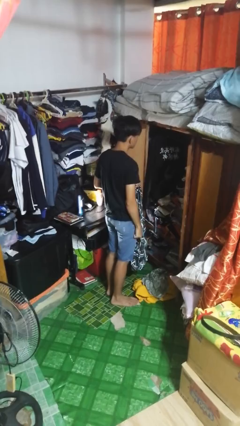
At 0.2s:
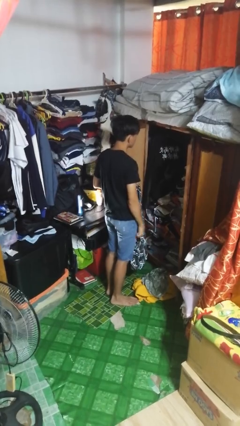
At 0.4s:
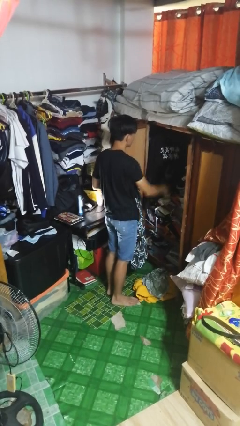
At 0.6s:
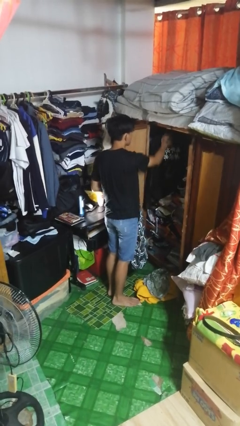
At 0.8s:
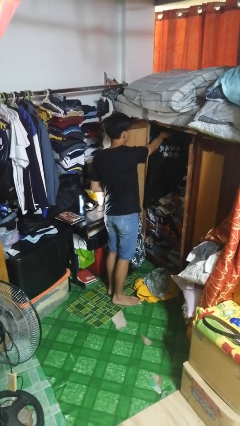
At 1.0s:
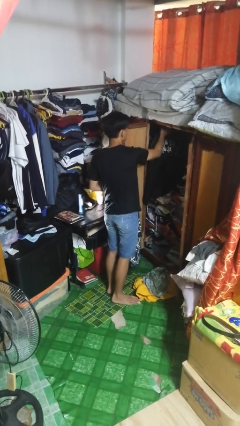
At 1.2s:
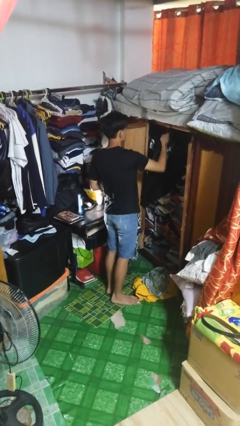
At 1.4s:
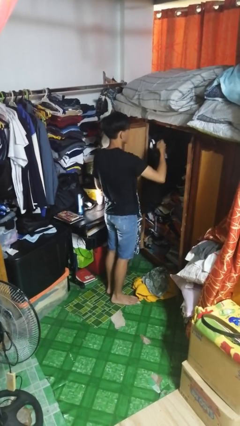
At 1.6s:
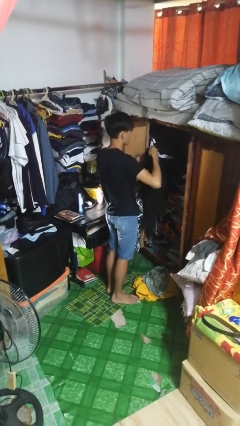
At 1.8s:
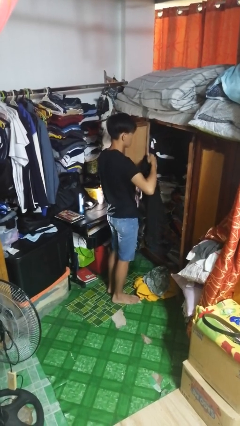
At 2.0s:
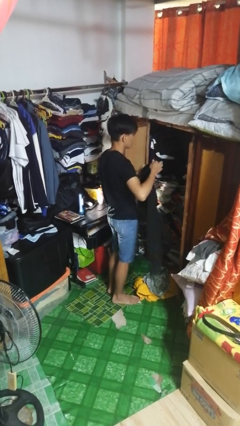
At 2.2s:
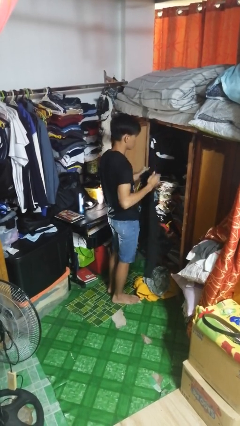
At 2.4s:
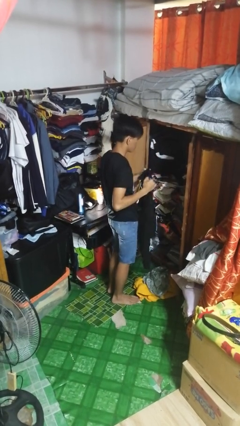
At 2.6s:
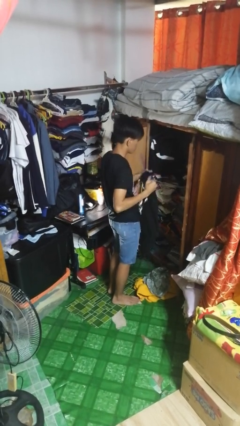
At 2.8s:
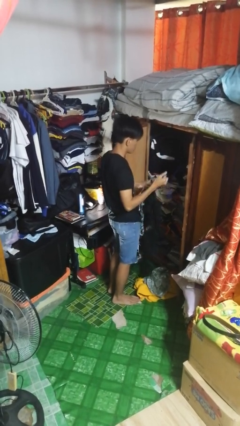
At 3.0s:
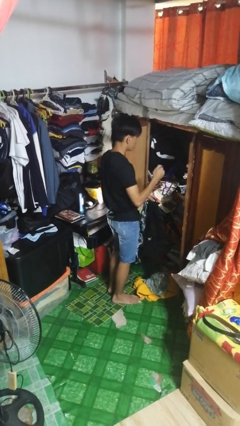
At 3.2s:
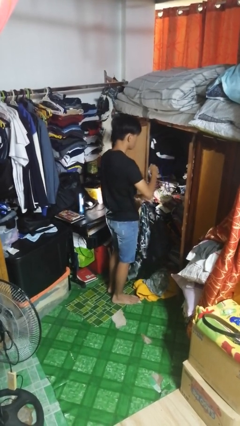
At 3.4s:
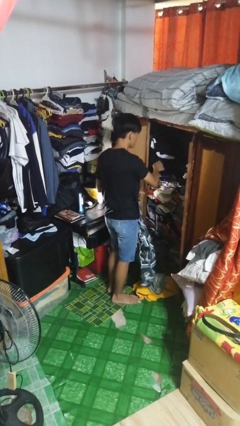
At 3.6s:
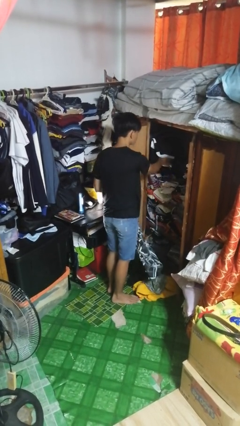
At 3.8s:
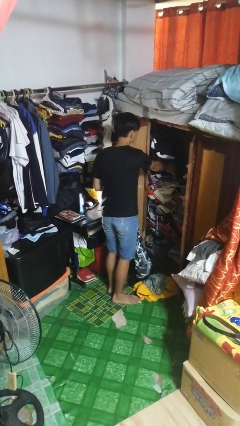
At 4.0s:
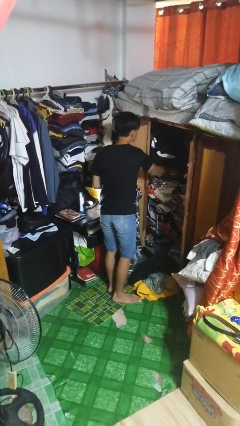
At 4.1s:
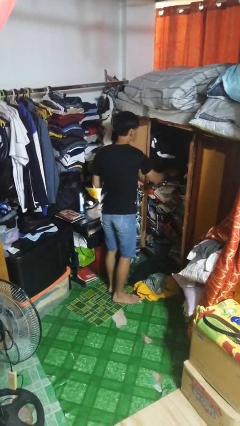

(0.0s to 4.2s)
person takes clothes from closet

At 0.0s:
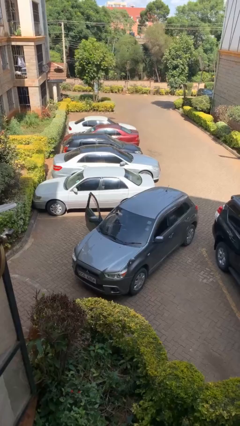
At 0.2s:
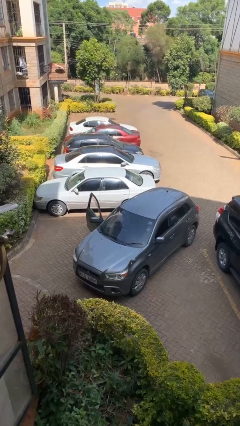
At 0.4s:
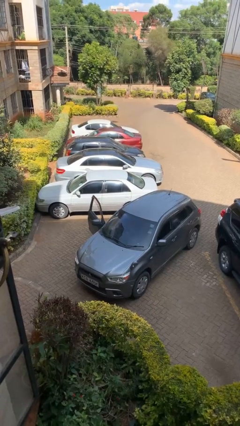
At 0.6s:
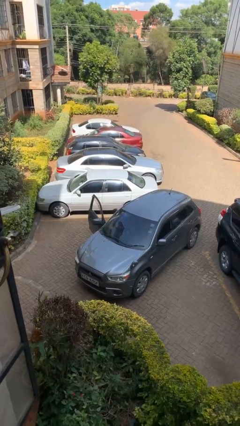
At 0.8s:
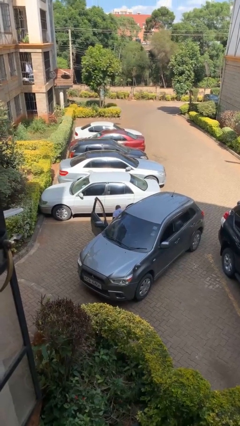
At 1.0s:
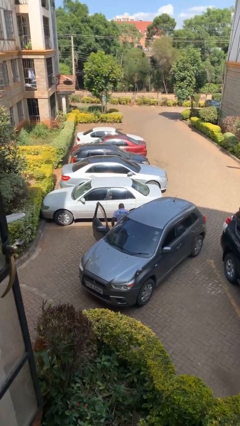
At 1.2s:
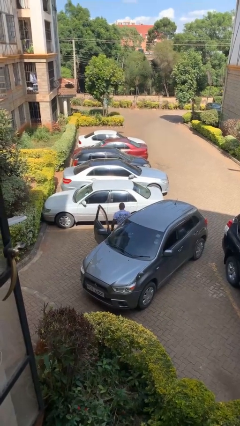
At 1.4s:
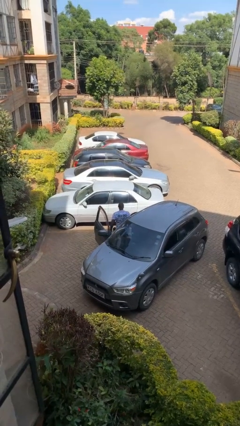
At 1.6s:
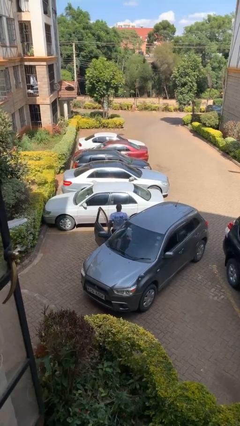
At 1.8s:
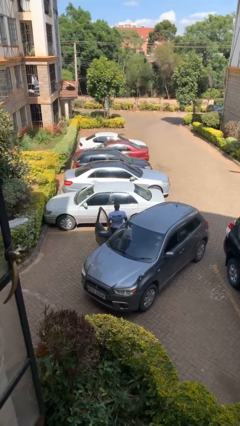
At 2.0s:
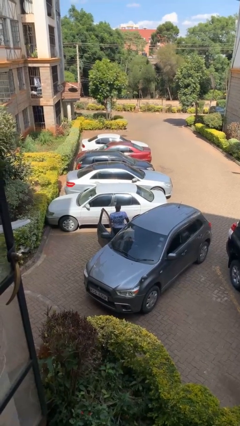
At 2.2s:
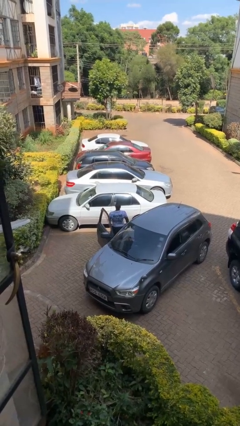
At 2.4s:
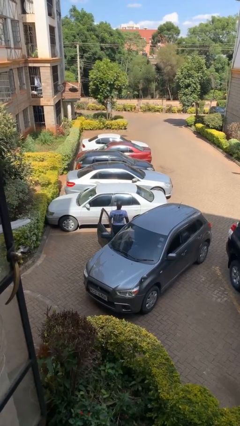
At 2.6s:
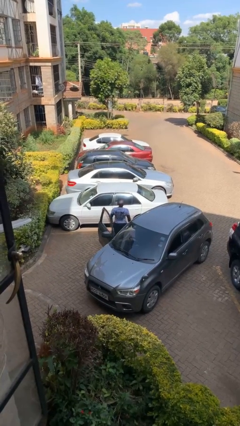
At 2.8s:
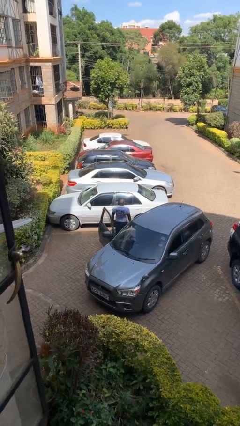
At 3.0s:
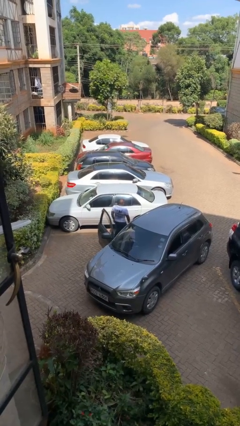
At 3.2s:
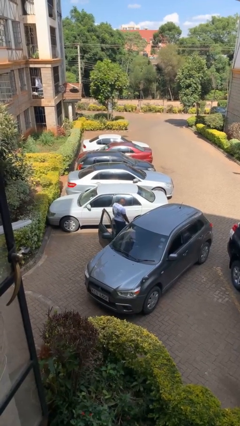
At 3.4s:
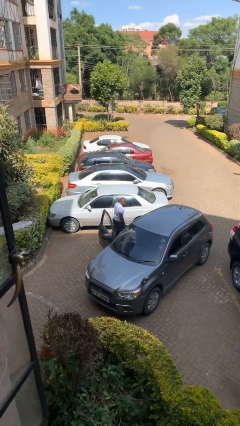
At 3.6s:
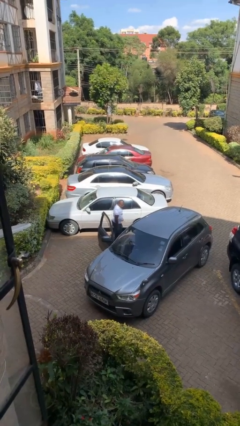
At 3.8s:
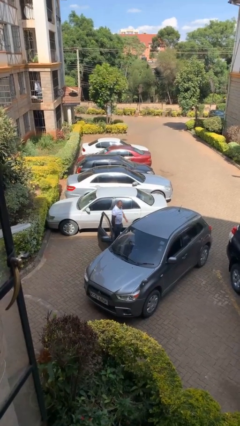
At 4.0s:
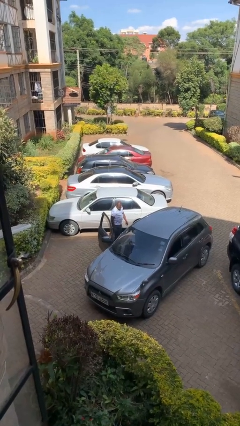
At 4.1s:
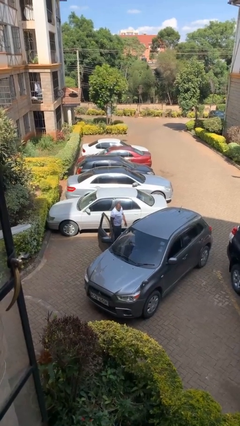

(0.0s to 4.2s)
person exits car

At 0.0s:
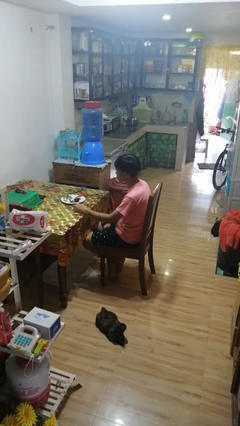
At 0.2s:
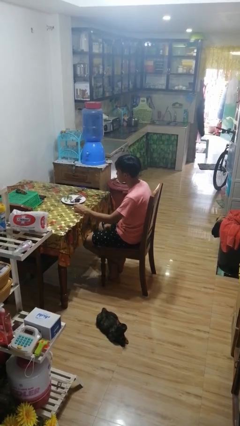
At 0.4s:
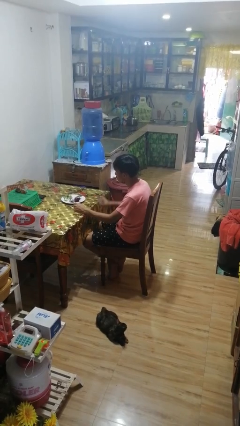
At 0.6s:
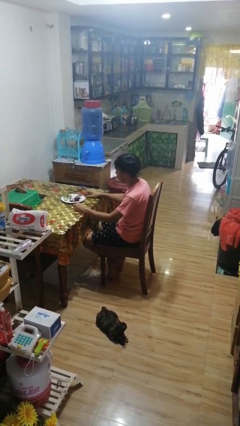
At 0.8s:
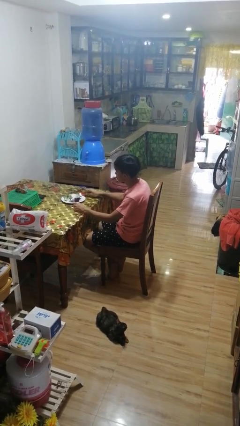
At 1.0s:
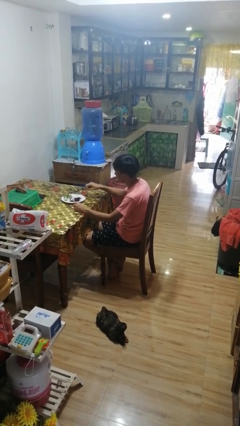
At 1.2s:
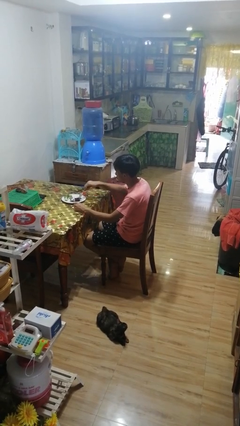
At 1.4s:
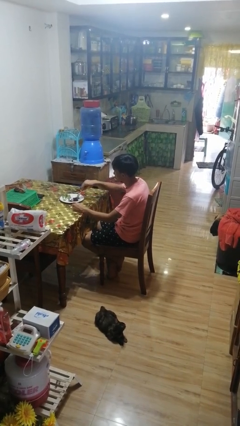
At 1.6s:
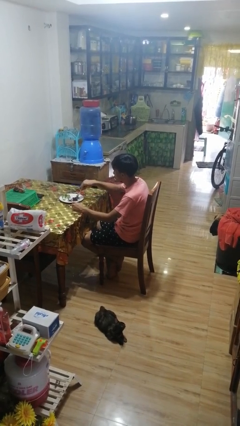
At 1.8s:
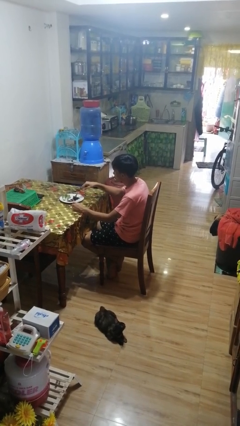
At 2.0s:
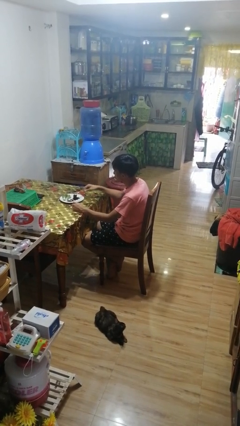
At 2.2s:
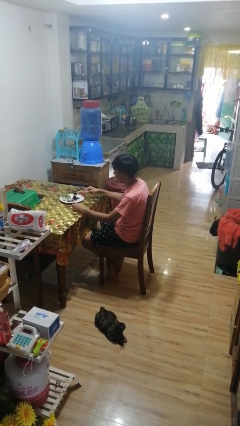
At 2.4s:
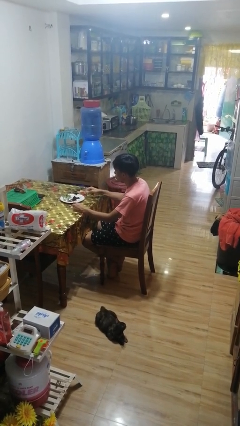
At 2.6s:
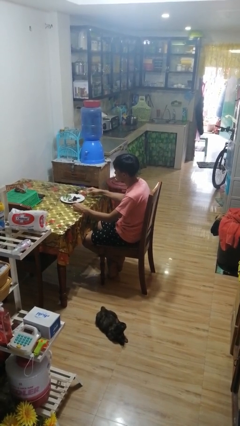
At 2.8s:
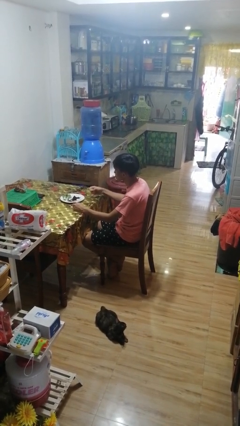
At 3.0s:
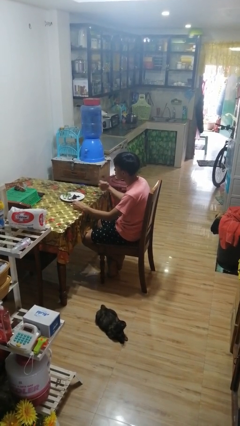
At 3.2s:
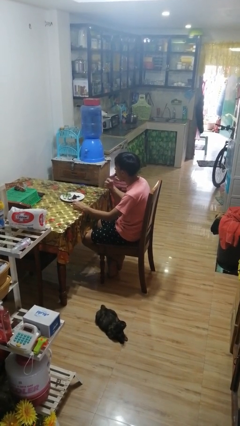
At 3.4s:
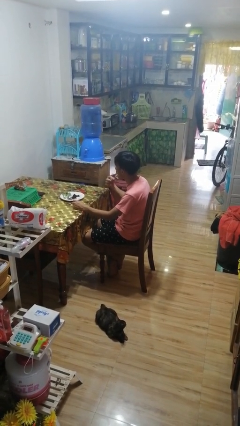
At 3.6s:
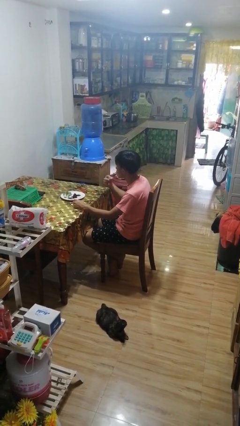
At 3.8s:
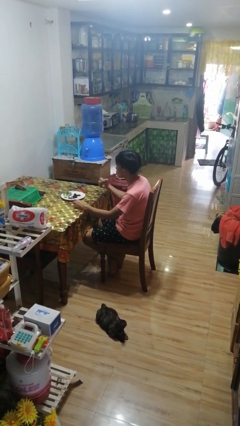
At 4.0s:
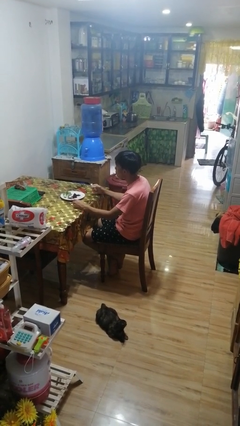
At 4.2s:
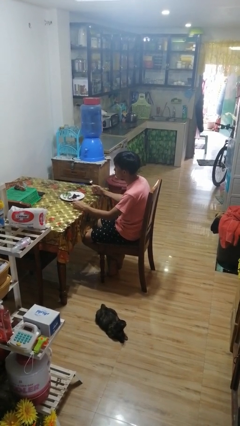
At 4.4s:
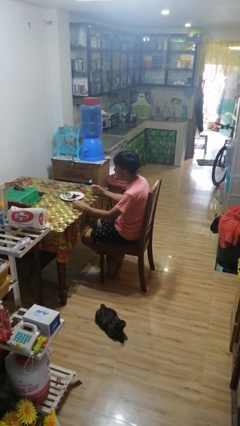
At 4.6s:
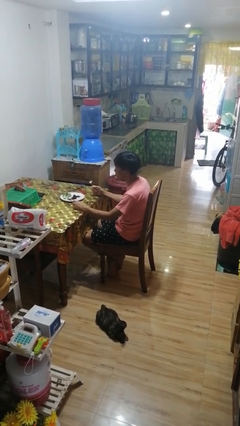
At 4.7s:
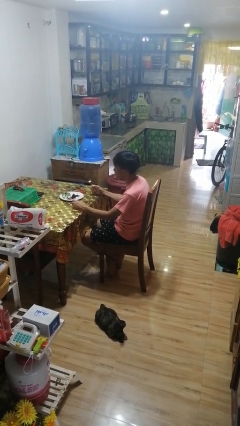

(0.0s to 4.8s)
person eats with utensil

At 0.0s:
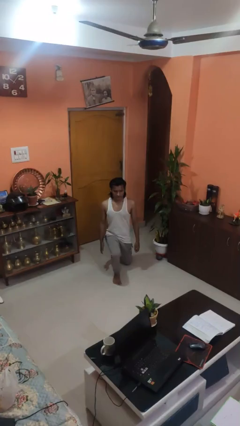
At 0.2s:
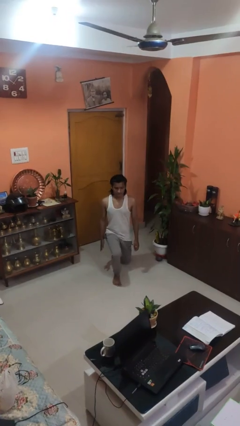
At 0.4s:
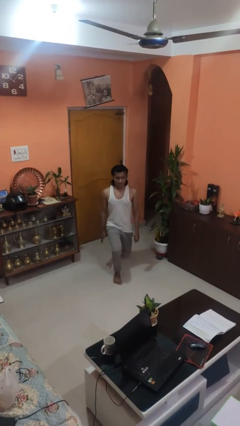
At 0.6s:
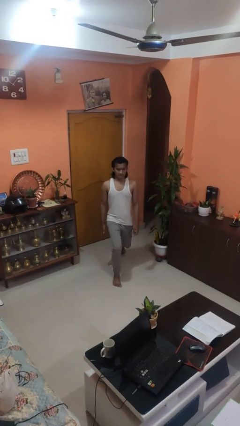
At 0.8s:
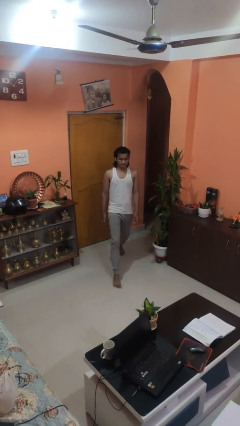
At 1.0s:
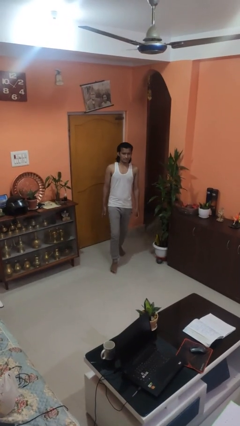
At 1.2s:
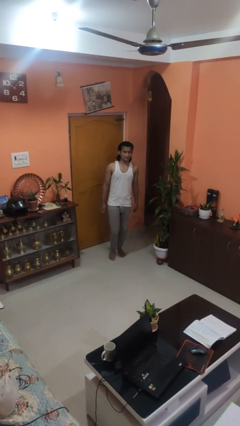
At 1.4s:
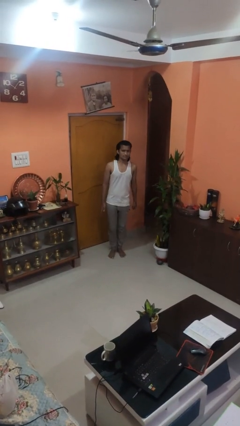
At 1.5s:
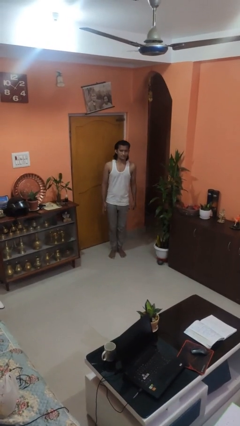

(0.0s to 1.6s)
person stands up from floor

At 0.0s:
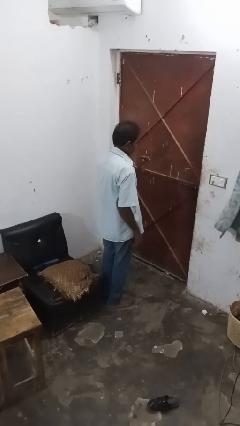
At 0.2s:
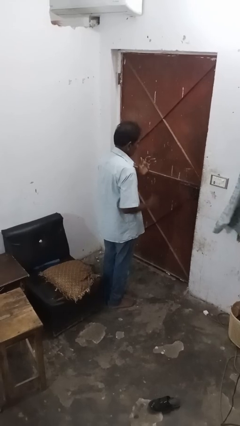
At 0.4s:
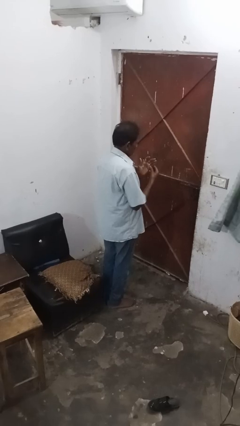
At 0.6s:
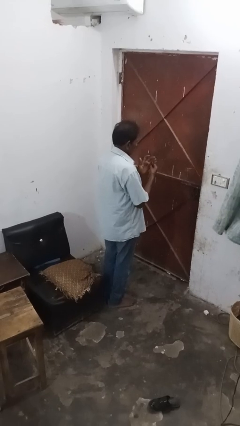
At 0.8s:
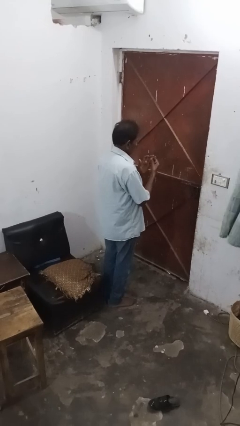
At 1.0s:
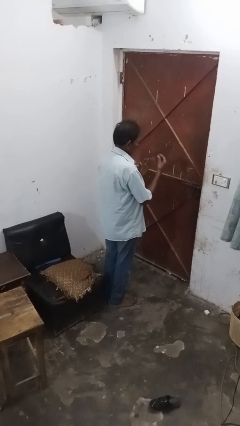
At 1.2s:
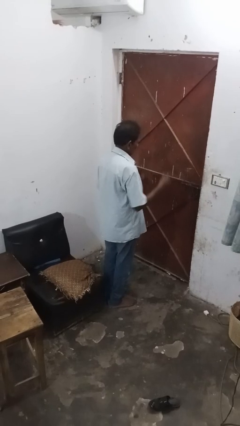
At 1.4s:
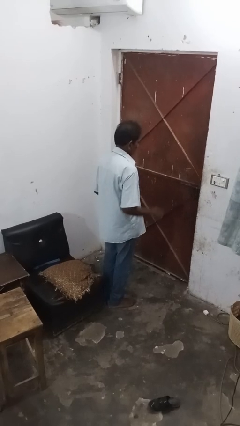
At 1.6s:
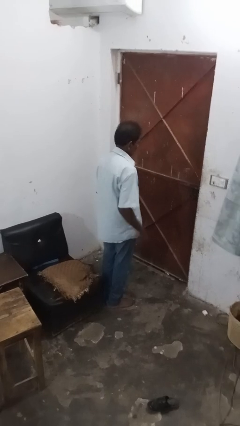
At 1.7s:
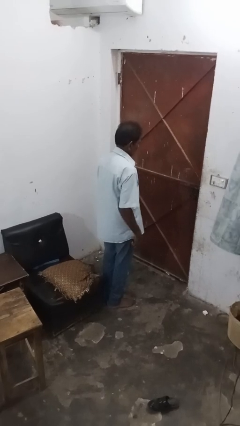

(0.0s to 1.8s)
person takes off ring

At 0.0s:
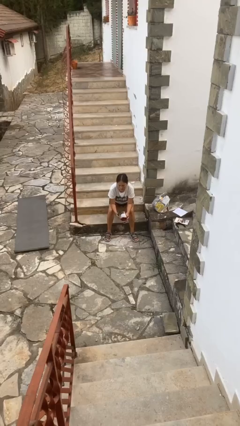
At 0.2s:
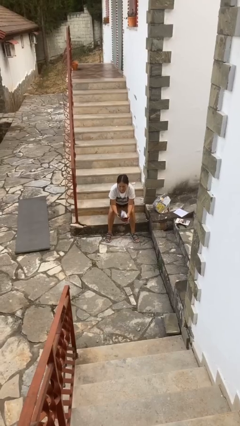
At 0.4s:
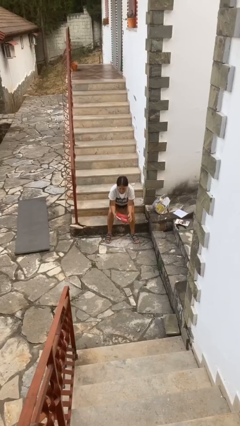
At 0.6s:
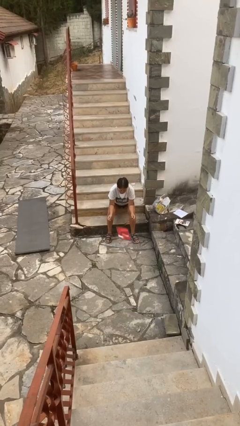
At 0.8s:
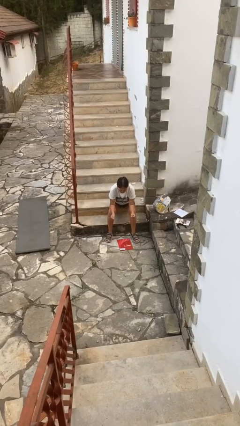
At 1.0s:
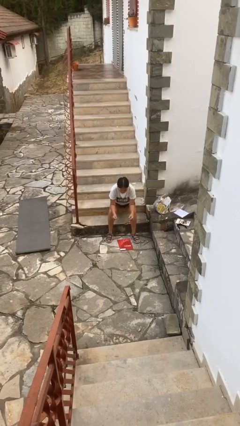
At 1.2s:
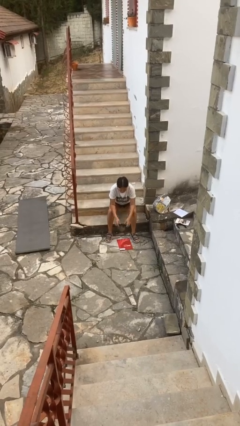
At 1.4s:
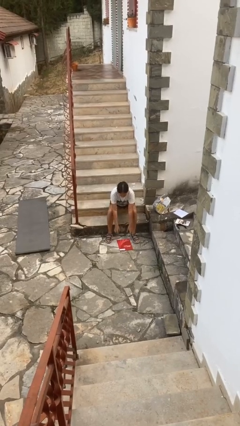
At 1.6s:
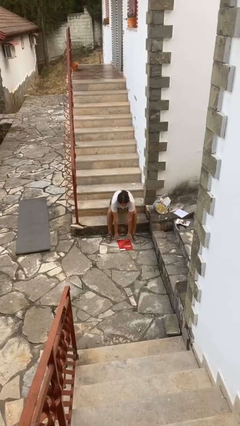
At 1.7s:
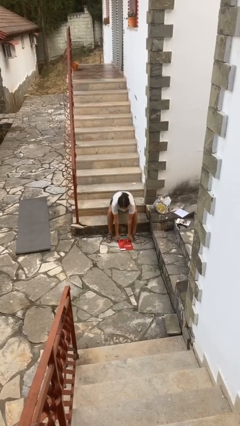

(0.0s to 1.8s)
person drops object
